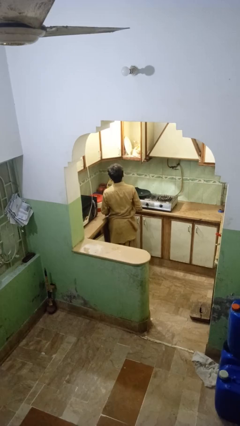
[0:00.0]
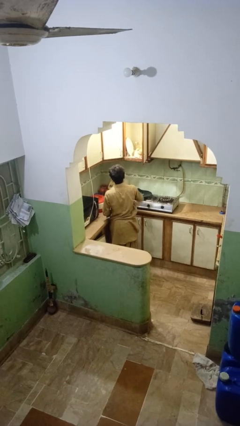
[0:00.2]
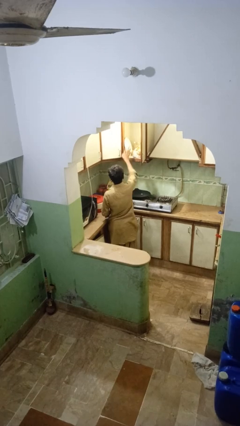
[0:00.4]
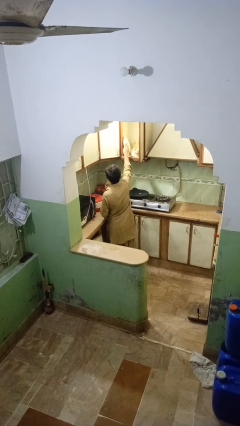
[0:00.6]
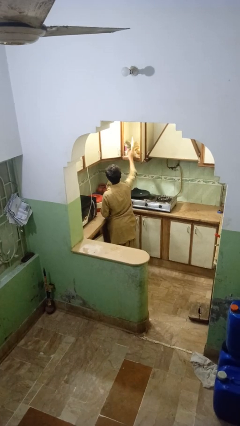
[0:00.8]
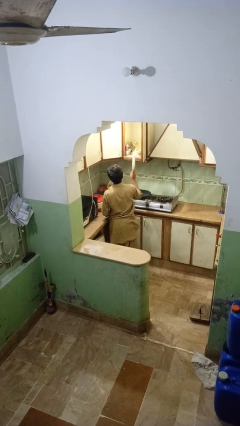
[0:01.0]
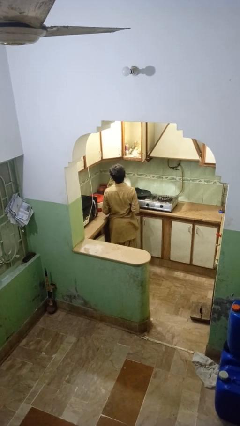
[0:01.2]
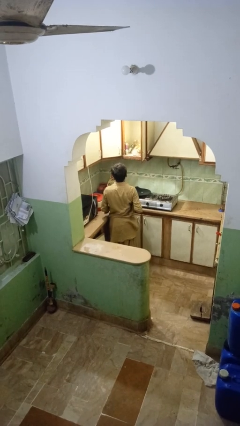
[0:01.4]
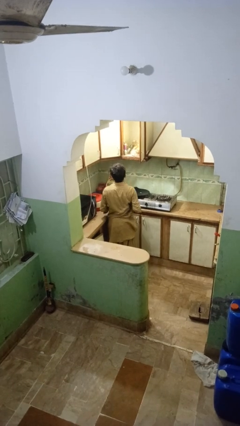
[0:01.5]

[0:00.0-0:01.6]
person takes object from cabinet

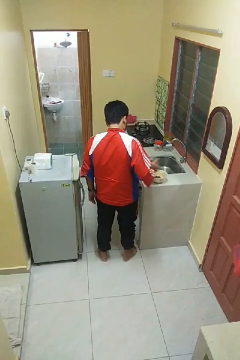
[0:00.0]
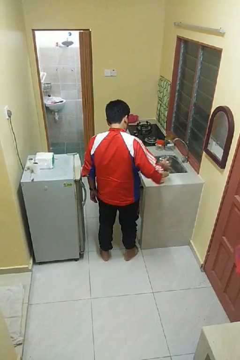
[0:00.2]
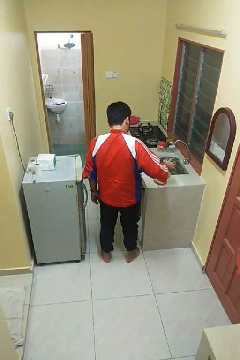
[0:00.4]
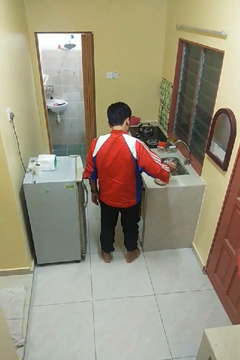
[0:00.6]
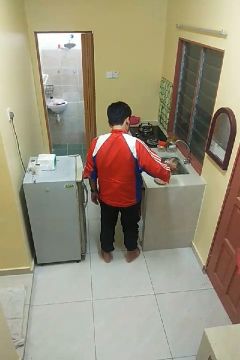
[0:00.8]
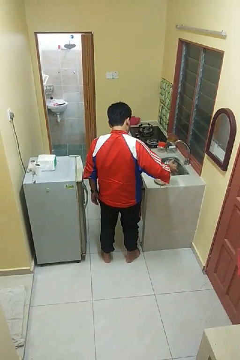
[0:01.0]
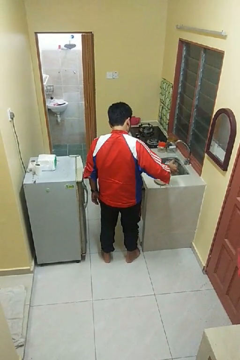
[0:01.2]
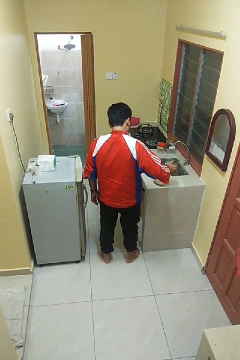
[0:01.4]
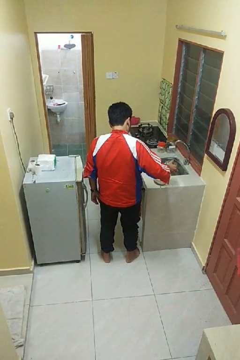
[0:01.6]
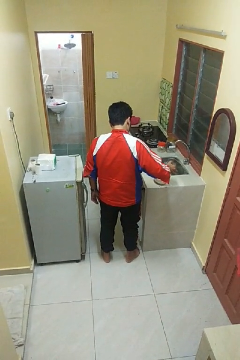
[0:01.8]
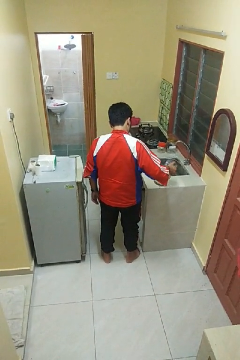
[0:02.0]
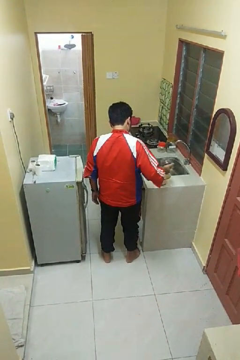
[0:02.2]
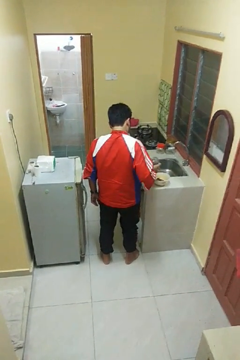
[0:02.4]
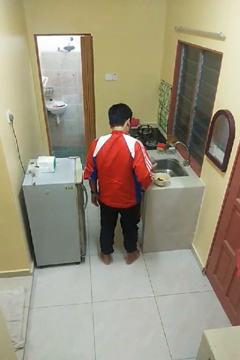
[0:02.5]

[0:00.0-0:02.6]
person pours into bowl

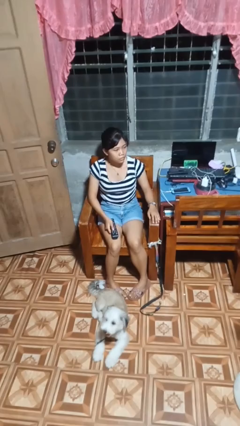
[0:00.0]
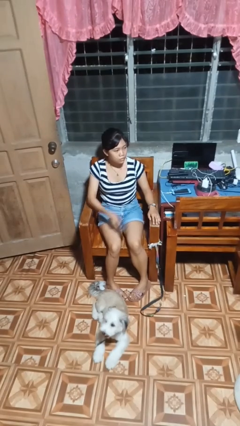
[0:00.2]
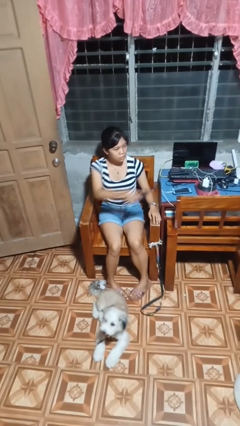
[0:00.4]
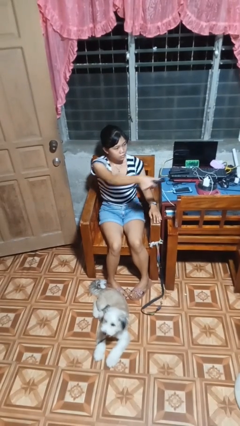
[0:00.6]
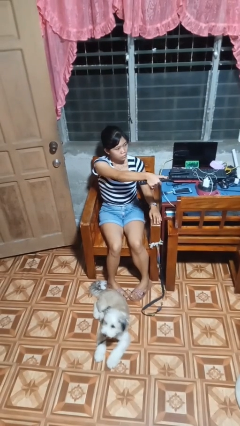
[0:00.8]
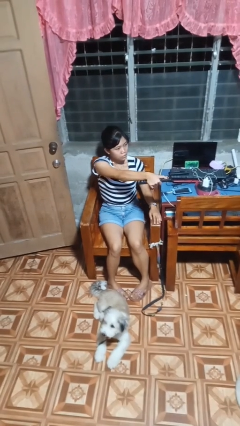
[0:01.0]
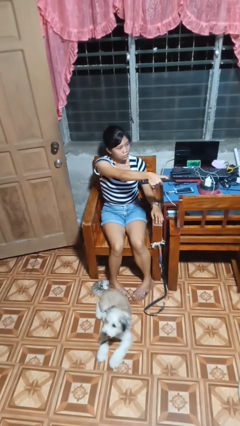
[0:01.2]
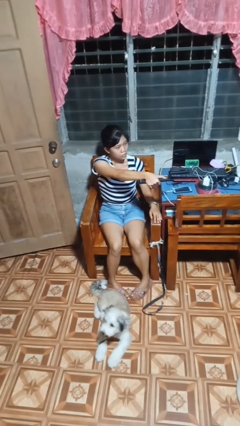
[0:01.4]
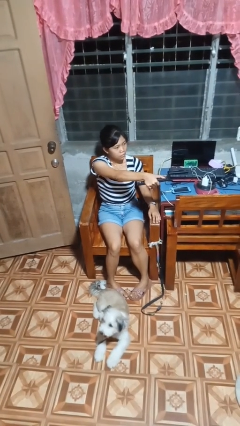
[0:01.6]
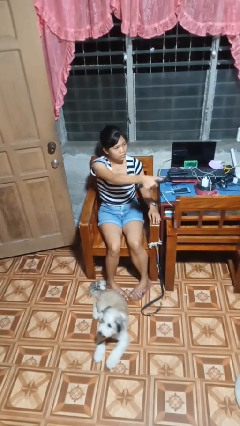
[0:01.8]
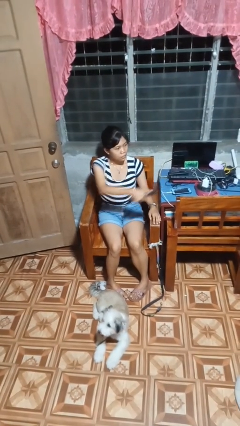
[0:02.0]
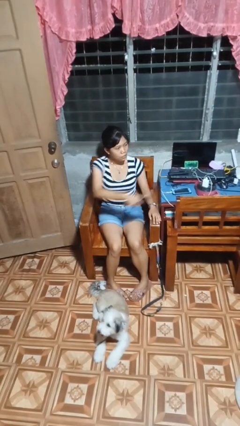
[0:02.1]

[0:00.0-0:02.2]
person uses television remote

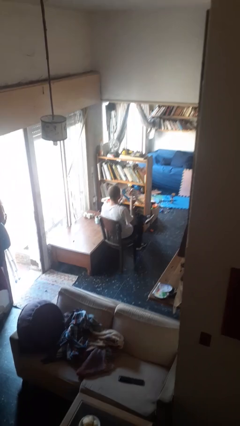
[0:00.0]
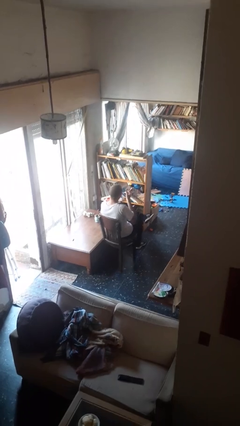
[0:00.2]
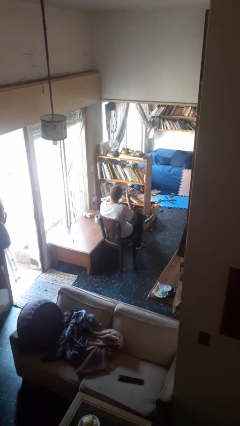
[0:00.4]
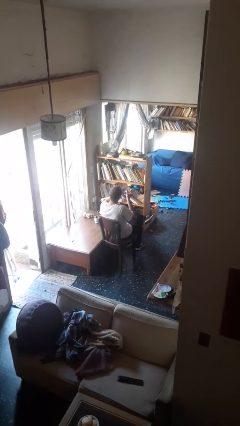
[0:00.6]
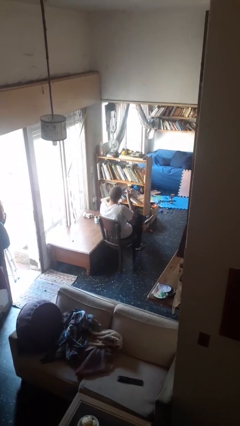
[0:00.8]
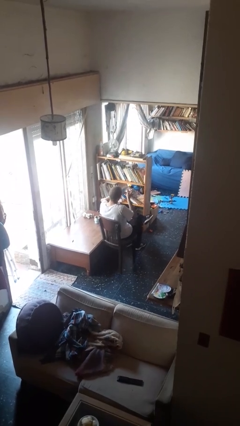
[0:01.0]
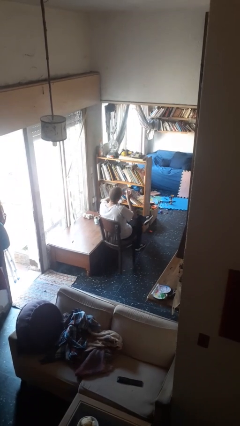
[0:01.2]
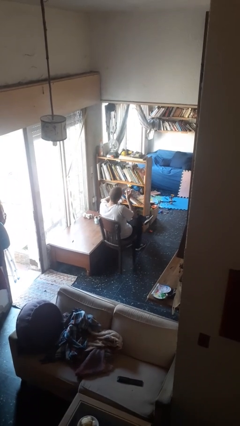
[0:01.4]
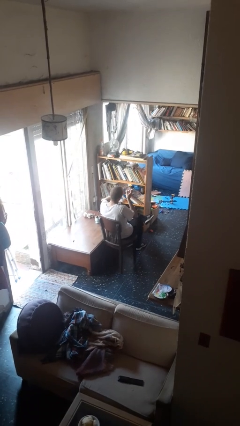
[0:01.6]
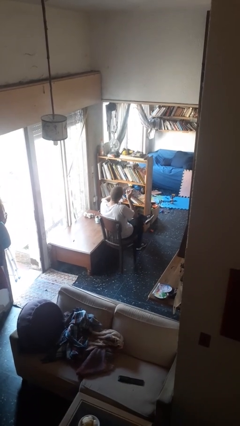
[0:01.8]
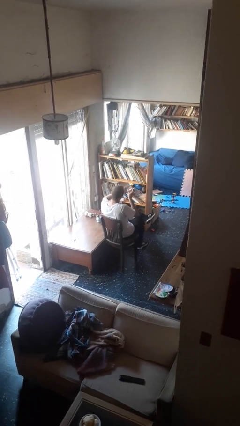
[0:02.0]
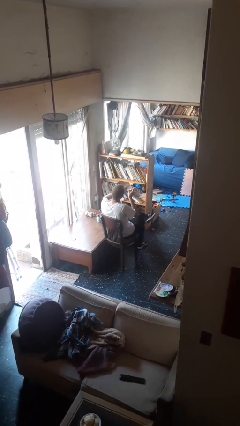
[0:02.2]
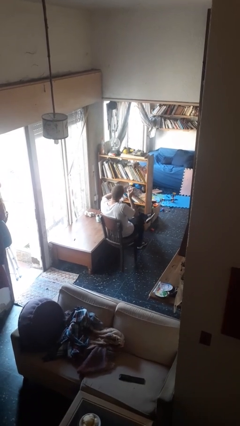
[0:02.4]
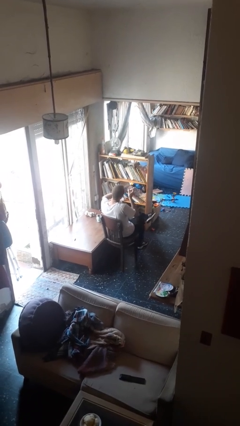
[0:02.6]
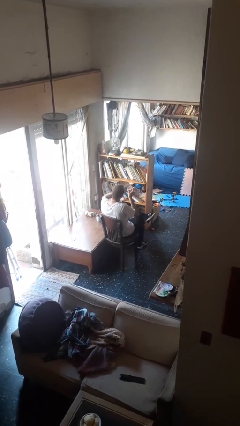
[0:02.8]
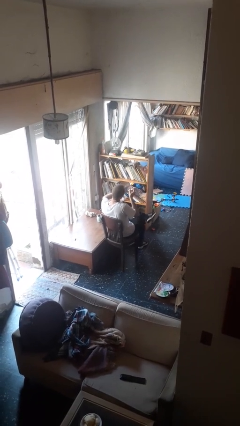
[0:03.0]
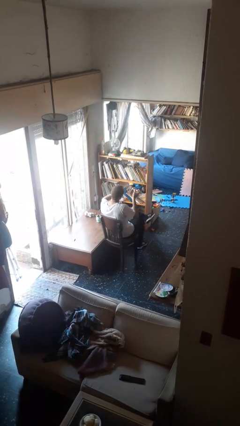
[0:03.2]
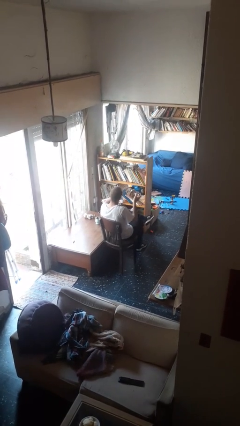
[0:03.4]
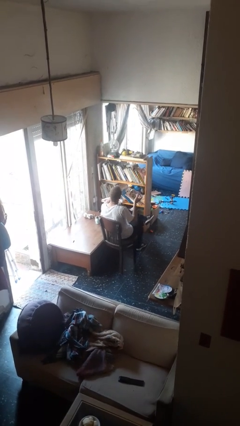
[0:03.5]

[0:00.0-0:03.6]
person clips fingernails

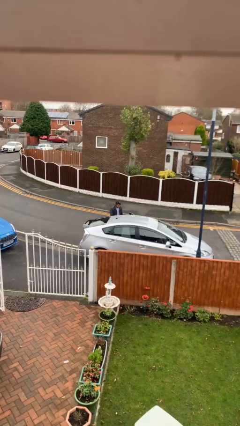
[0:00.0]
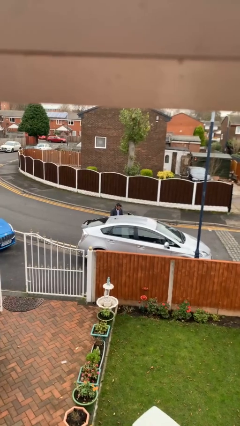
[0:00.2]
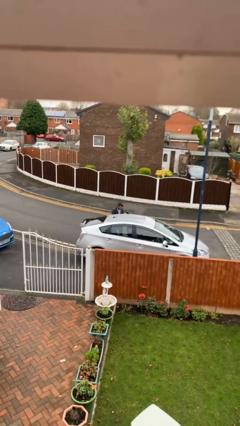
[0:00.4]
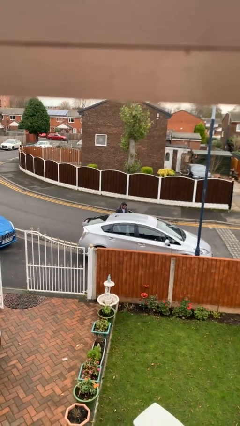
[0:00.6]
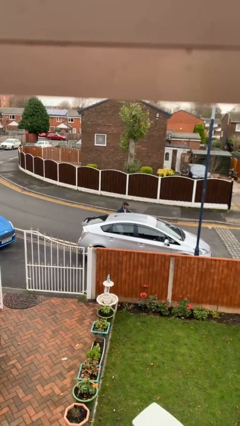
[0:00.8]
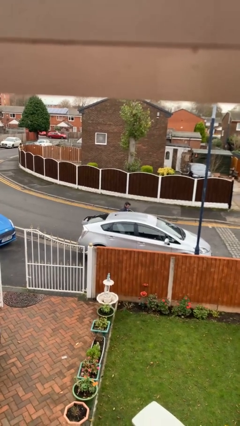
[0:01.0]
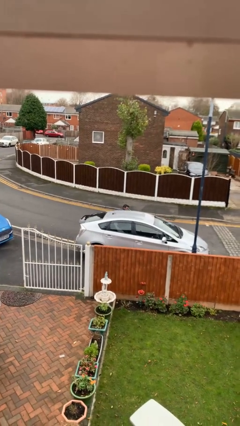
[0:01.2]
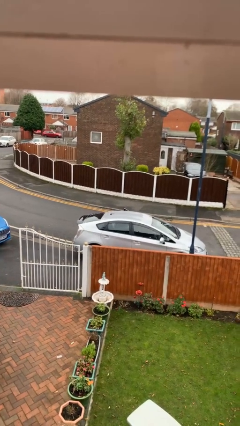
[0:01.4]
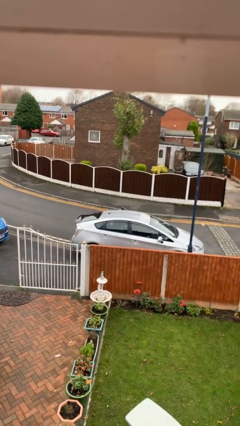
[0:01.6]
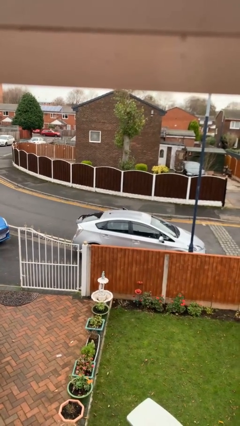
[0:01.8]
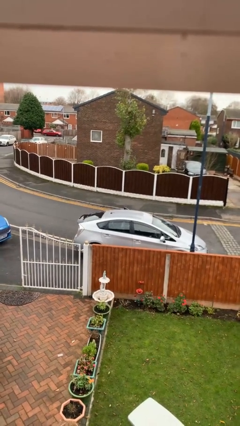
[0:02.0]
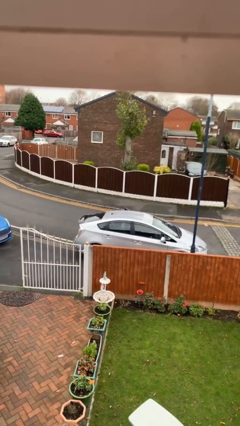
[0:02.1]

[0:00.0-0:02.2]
person enters car

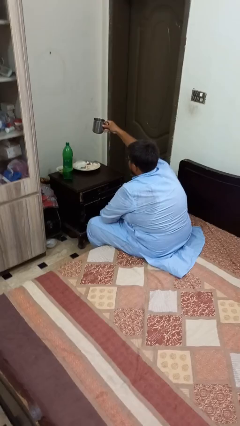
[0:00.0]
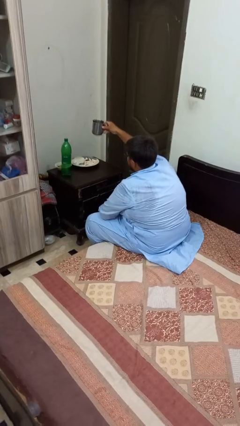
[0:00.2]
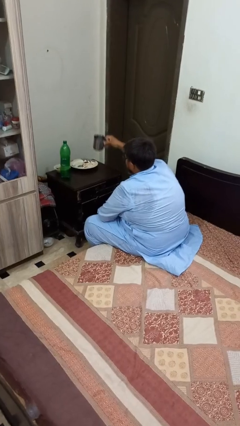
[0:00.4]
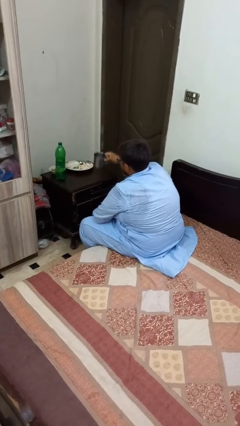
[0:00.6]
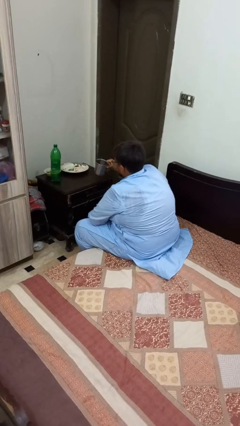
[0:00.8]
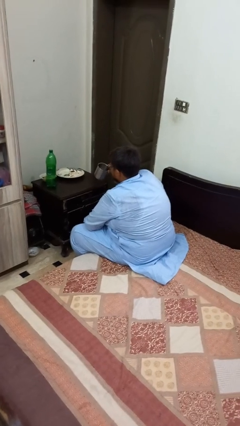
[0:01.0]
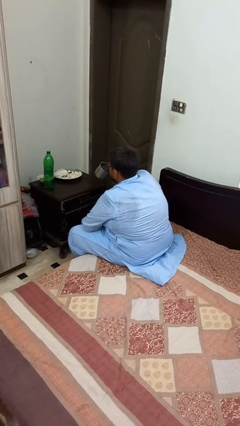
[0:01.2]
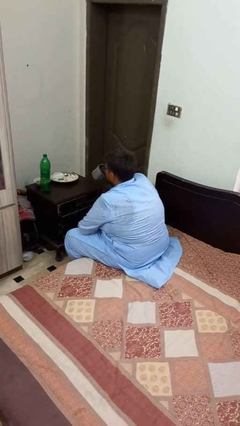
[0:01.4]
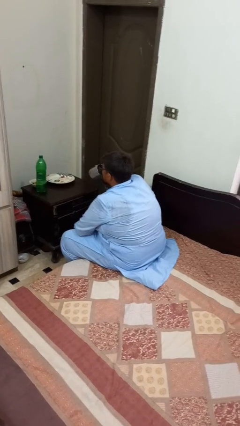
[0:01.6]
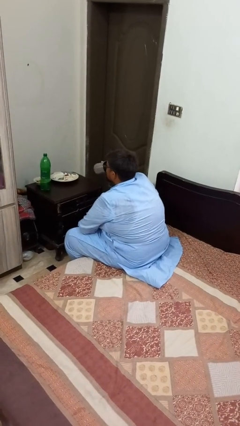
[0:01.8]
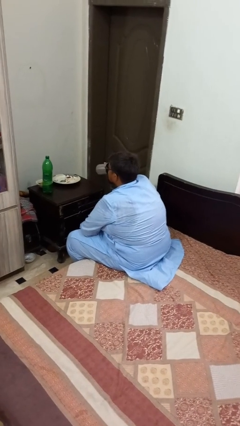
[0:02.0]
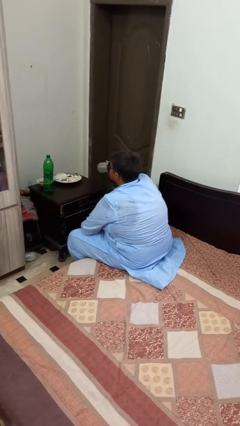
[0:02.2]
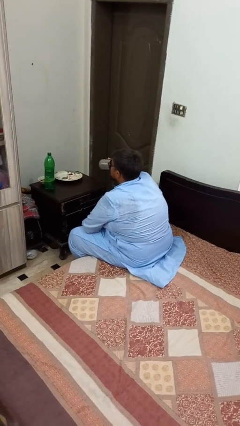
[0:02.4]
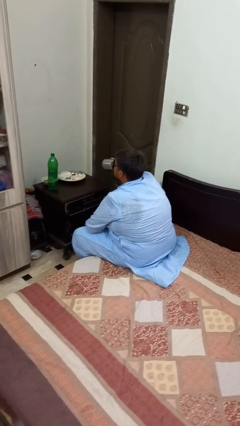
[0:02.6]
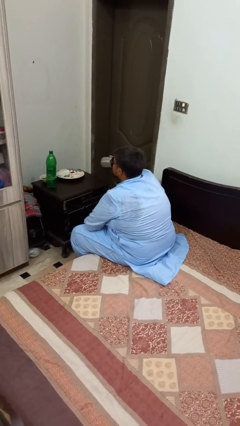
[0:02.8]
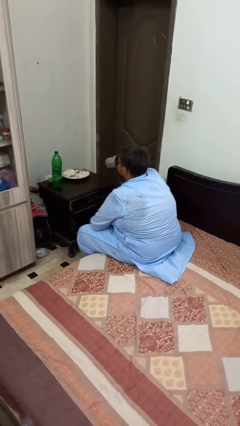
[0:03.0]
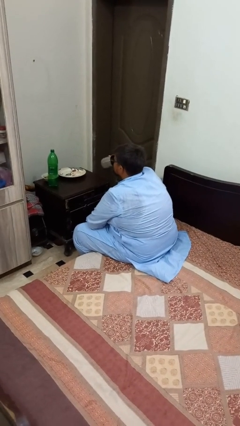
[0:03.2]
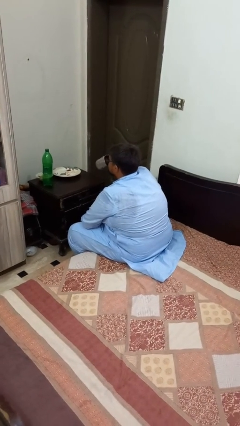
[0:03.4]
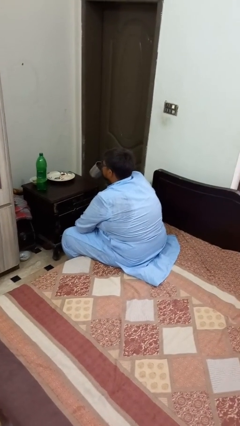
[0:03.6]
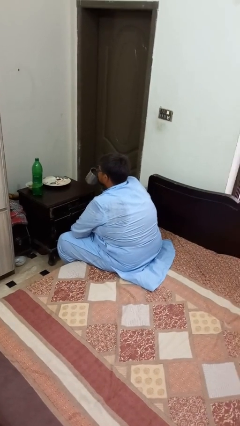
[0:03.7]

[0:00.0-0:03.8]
person drinks from shotglass

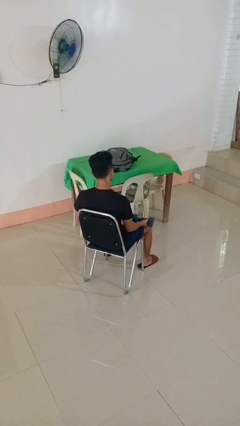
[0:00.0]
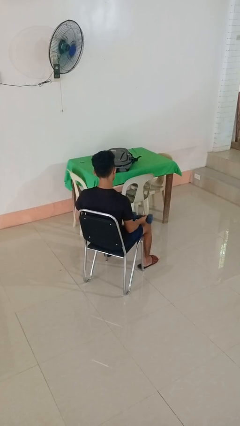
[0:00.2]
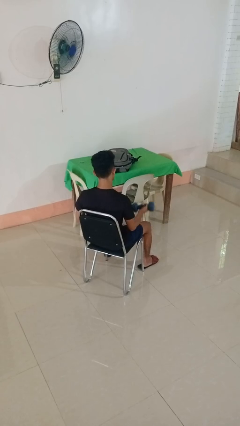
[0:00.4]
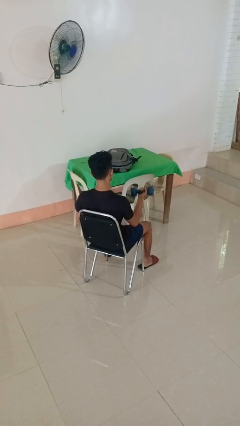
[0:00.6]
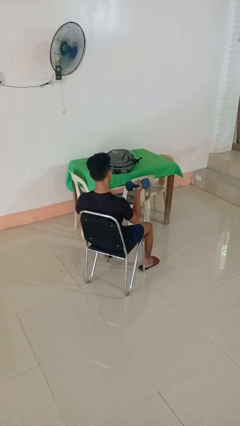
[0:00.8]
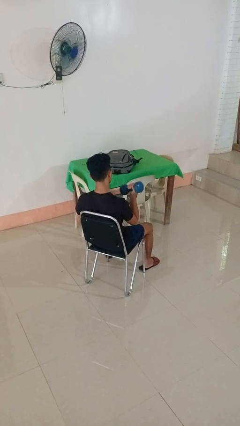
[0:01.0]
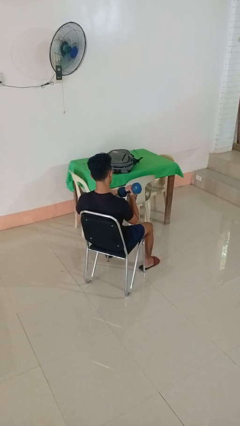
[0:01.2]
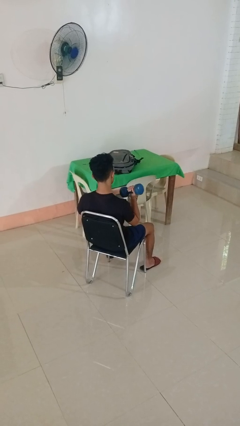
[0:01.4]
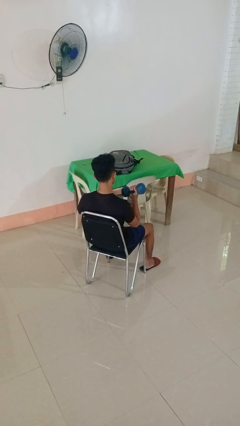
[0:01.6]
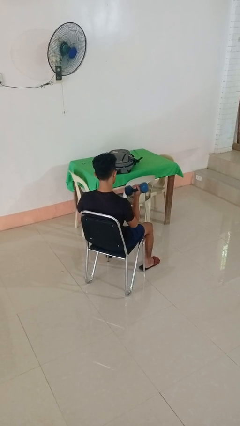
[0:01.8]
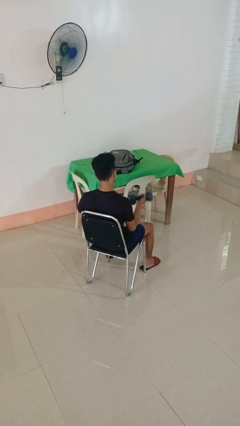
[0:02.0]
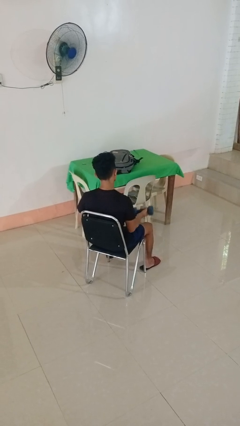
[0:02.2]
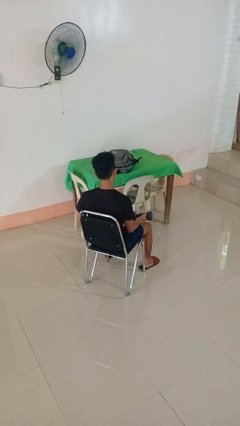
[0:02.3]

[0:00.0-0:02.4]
person lifts dumbbells
